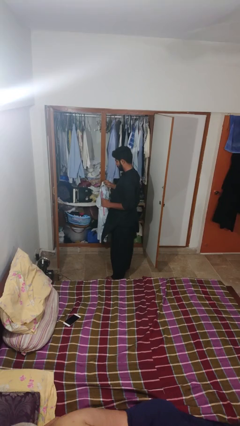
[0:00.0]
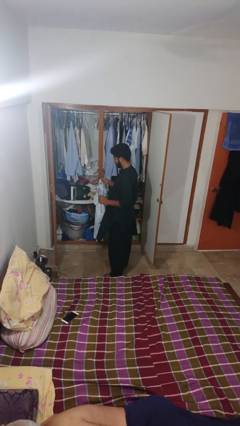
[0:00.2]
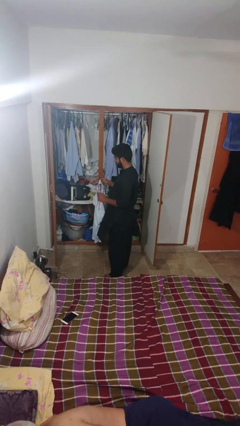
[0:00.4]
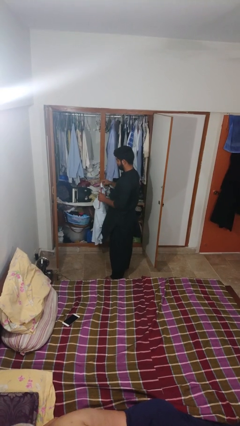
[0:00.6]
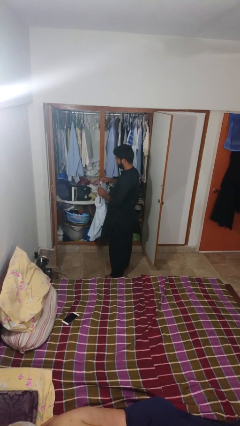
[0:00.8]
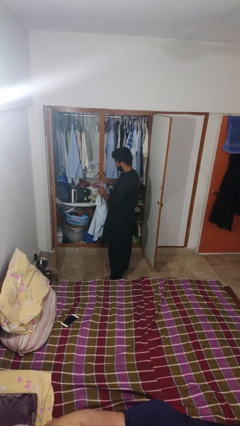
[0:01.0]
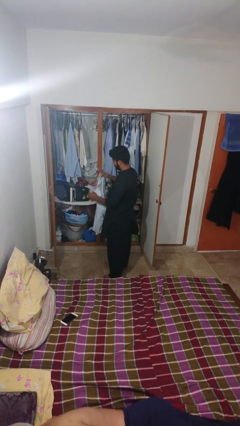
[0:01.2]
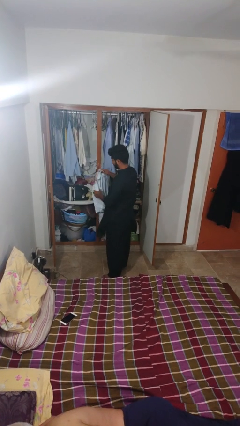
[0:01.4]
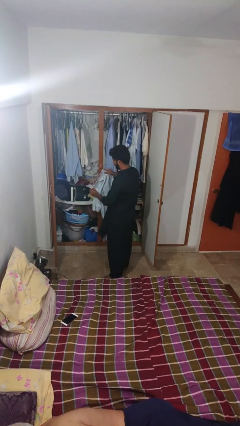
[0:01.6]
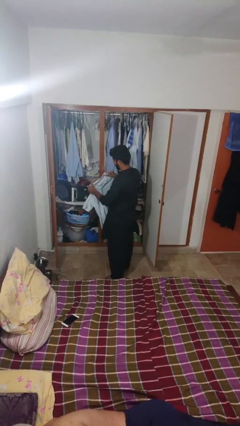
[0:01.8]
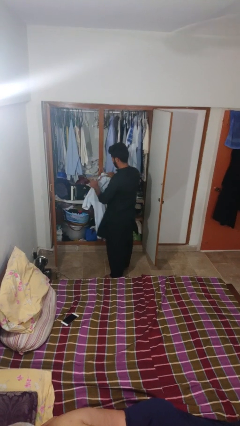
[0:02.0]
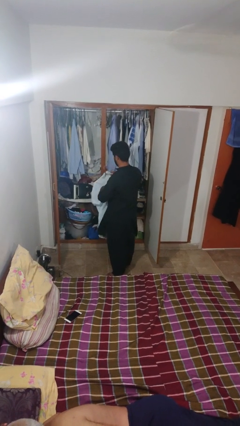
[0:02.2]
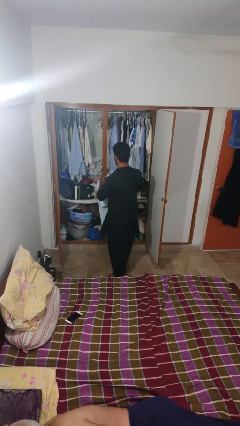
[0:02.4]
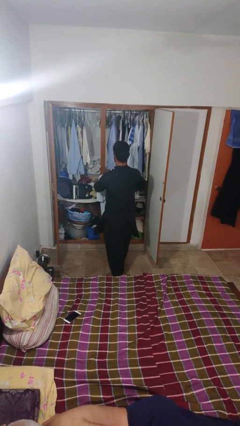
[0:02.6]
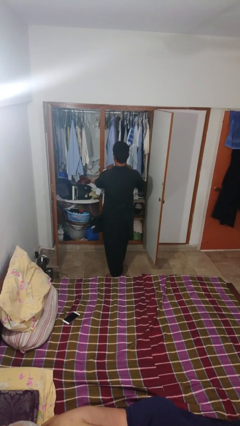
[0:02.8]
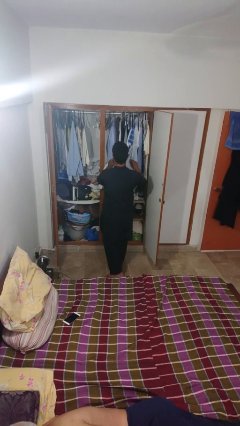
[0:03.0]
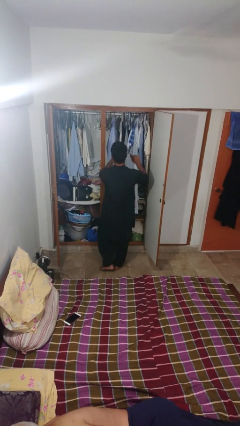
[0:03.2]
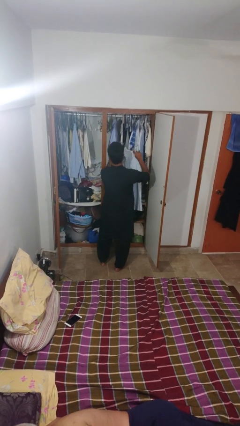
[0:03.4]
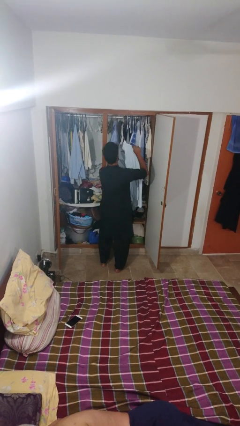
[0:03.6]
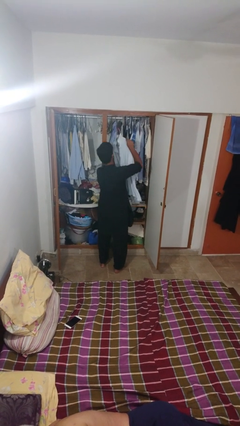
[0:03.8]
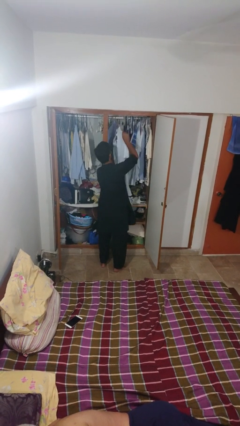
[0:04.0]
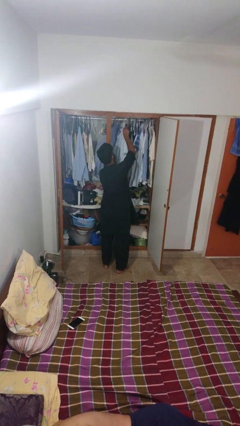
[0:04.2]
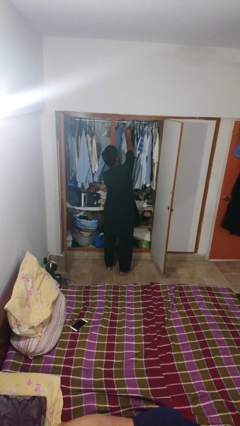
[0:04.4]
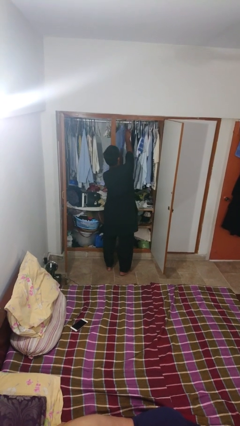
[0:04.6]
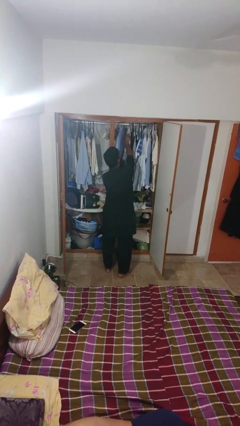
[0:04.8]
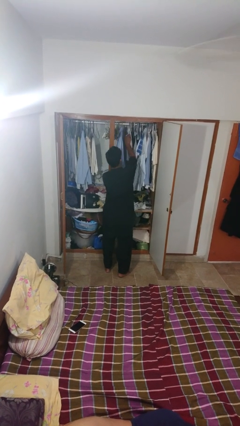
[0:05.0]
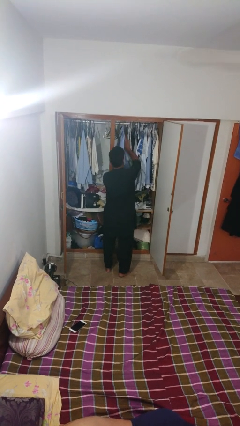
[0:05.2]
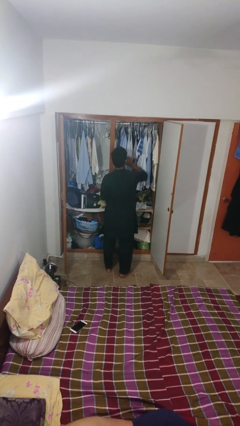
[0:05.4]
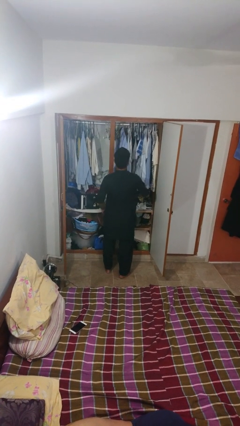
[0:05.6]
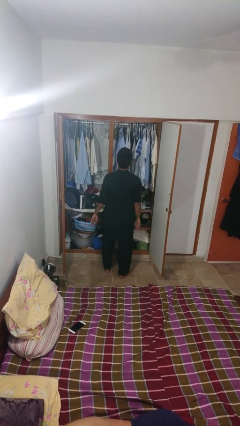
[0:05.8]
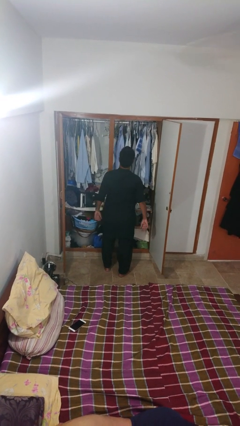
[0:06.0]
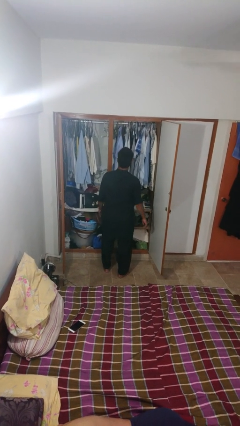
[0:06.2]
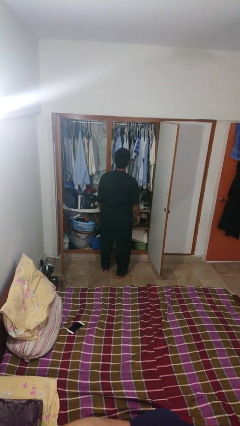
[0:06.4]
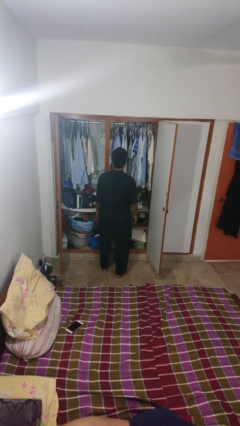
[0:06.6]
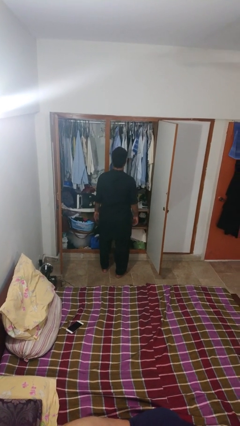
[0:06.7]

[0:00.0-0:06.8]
person puts clothes into closet

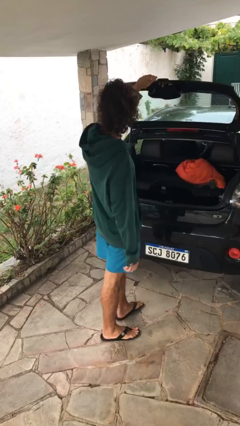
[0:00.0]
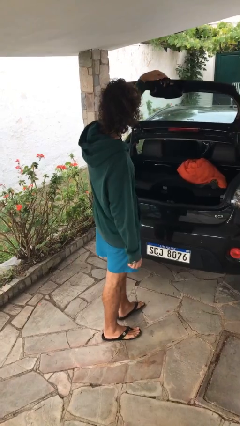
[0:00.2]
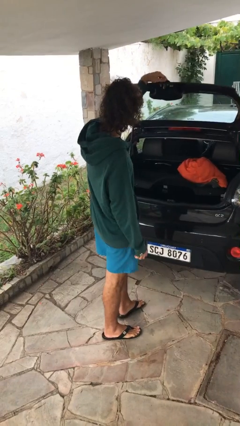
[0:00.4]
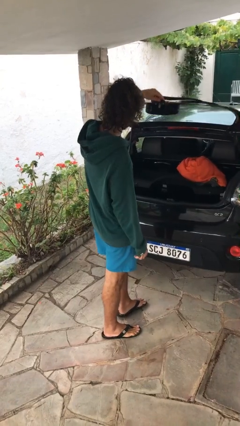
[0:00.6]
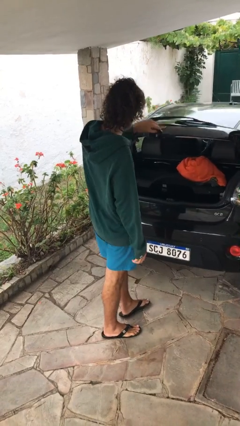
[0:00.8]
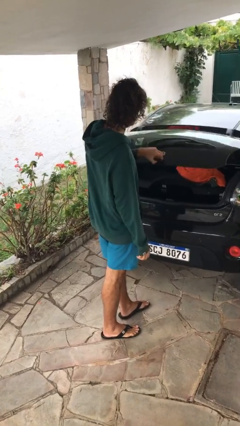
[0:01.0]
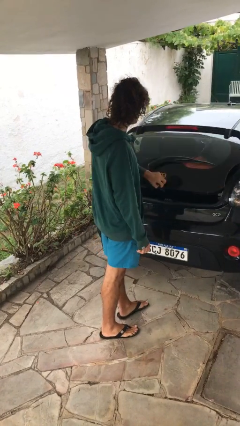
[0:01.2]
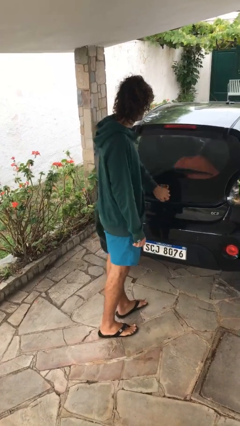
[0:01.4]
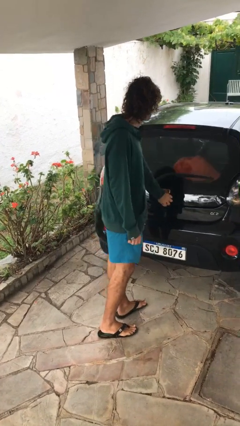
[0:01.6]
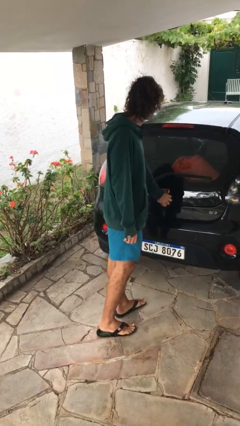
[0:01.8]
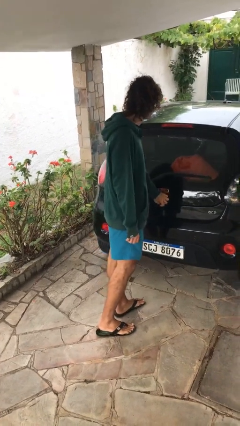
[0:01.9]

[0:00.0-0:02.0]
person closes car trunk

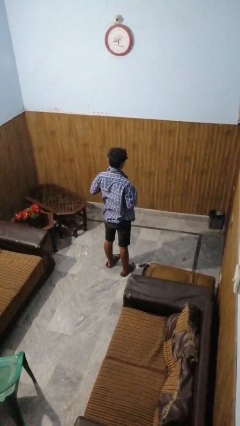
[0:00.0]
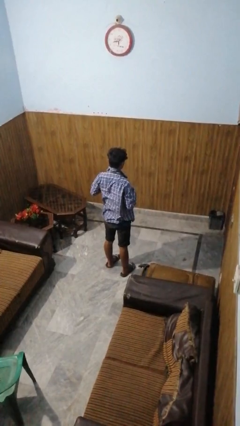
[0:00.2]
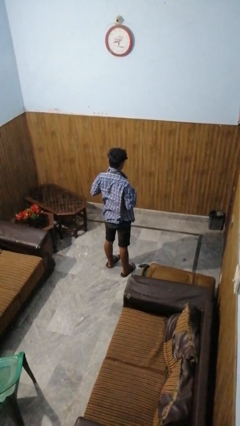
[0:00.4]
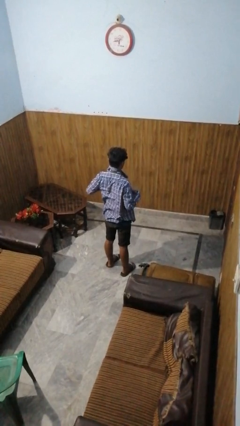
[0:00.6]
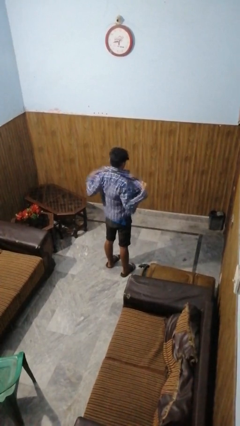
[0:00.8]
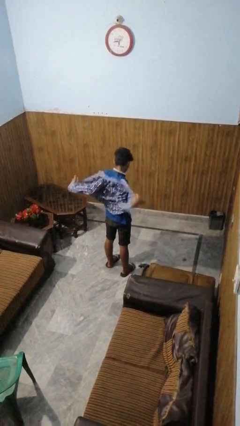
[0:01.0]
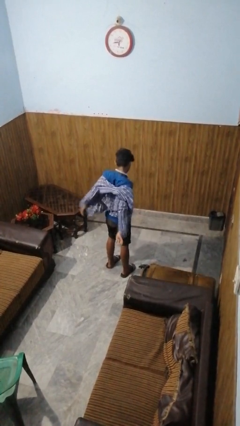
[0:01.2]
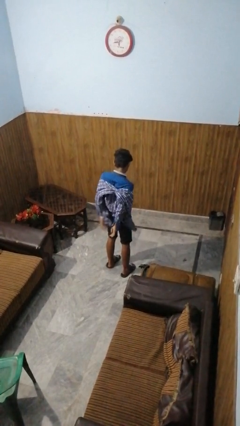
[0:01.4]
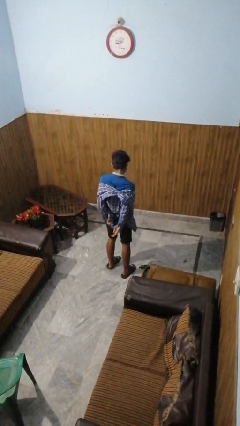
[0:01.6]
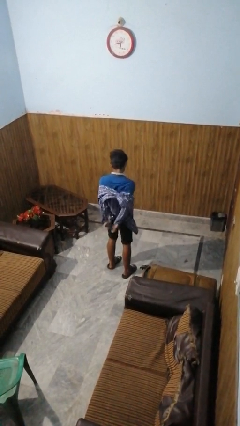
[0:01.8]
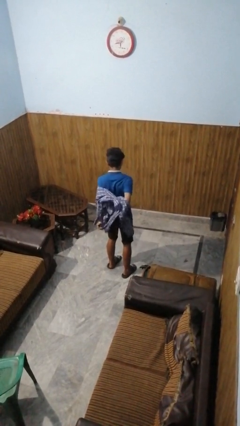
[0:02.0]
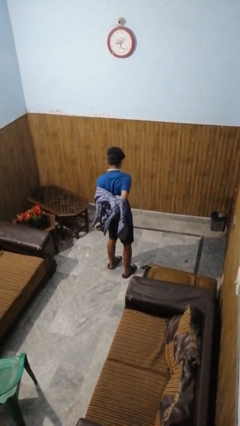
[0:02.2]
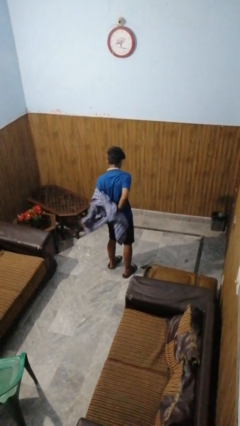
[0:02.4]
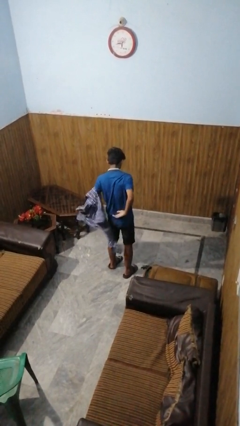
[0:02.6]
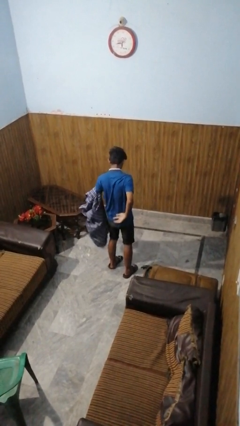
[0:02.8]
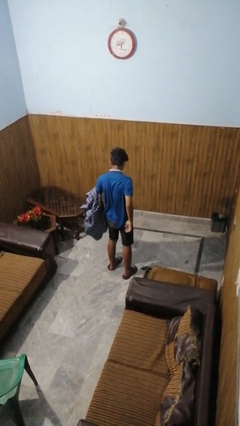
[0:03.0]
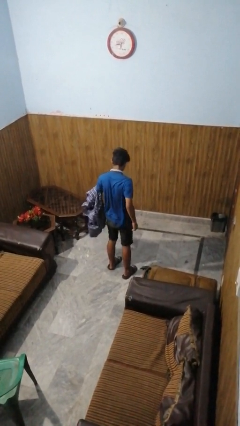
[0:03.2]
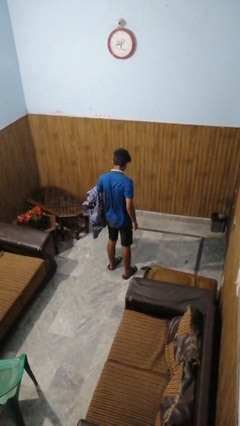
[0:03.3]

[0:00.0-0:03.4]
person takes off shirt

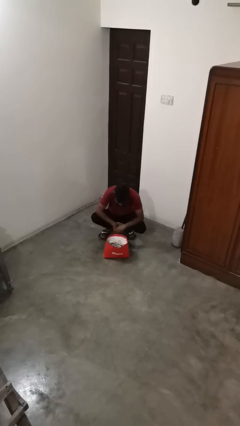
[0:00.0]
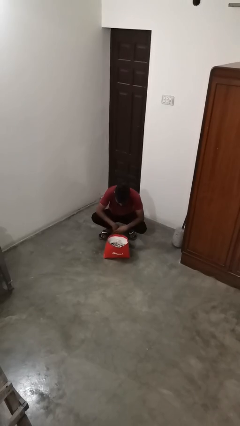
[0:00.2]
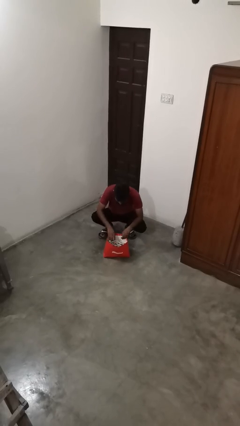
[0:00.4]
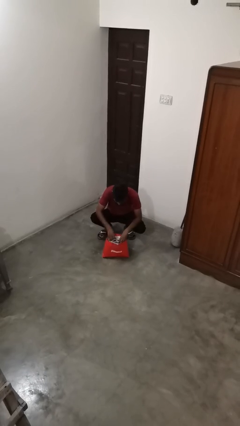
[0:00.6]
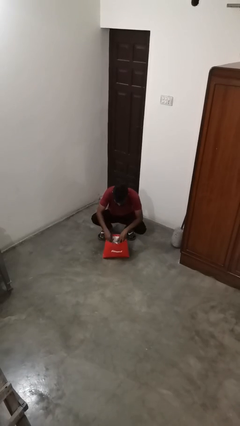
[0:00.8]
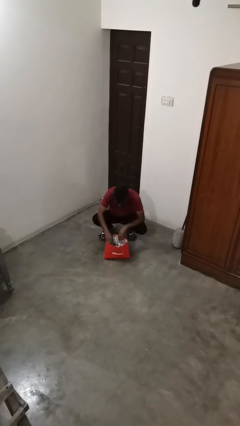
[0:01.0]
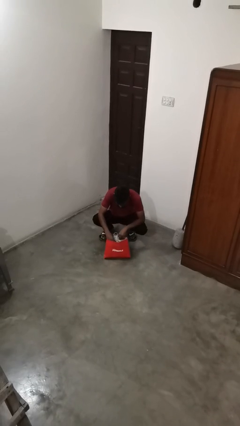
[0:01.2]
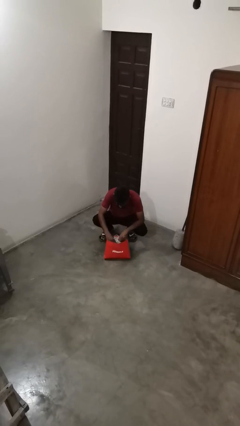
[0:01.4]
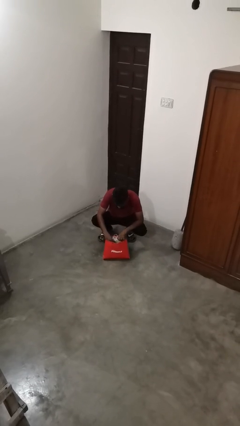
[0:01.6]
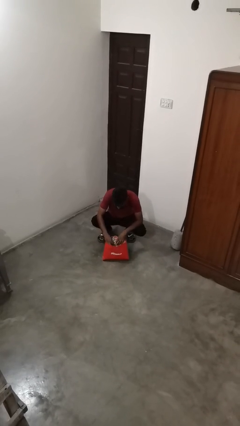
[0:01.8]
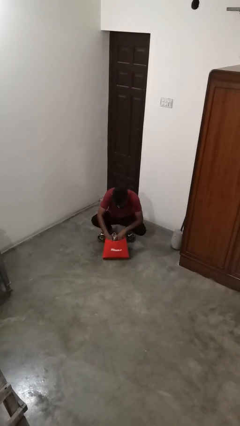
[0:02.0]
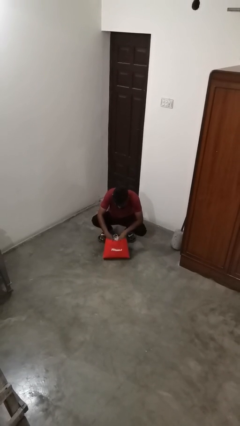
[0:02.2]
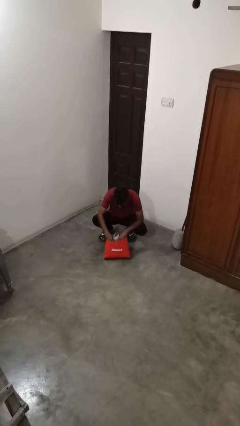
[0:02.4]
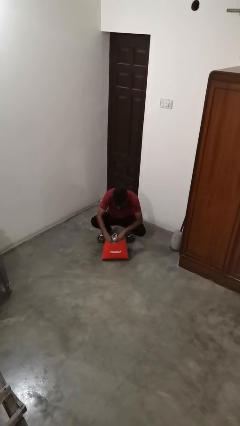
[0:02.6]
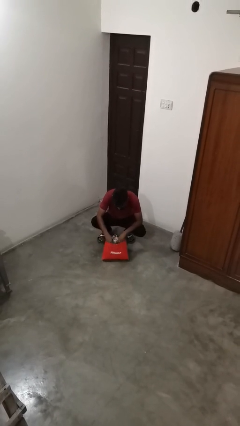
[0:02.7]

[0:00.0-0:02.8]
person searches in bag

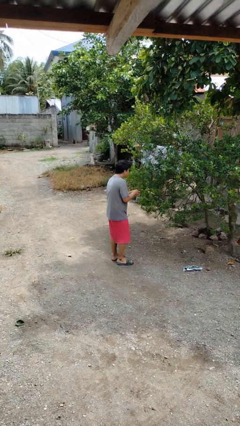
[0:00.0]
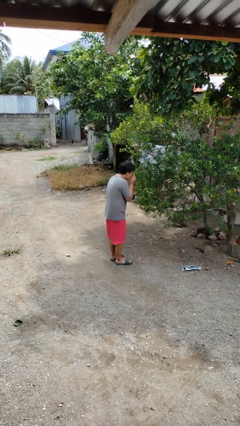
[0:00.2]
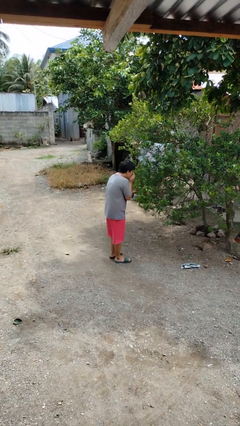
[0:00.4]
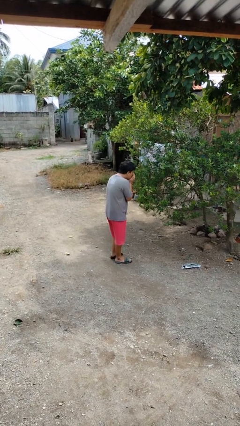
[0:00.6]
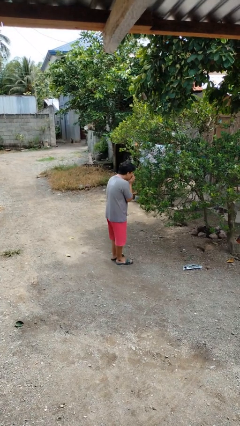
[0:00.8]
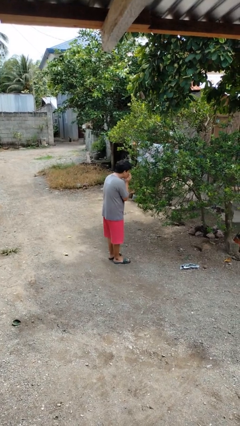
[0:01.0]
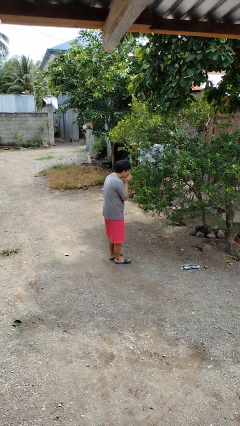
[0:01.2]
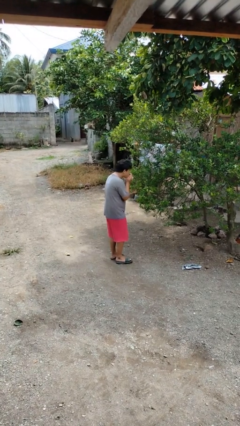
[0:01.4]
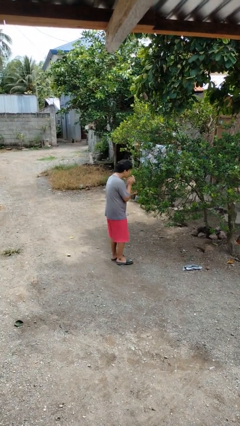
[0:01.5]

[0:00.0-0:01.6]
person blows into hands

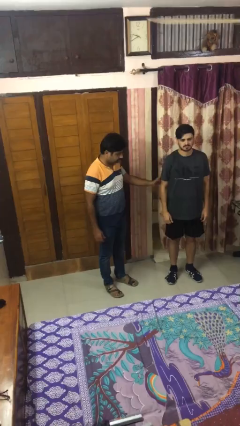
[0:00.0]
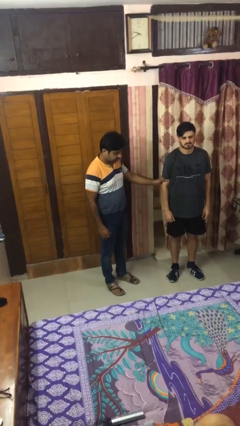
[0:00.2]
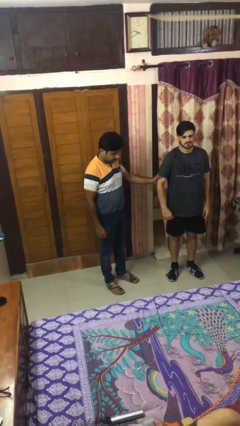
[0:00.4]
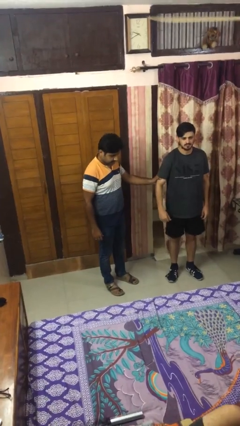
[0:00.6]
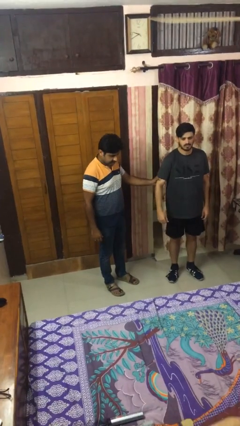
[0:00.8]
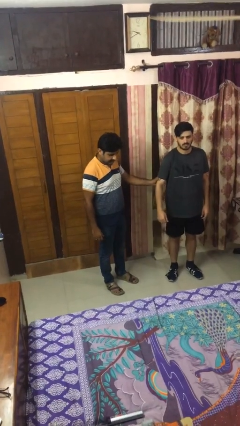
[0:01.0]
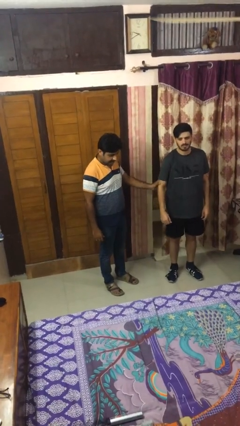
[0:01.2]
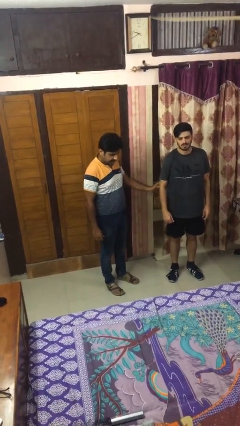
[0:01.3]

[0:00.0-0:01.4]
person grabs person by bicep
